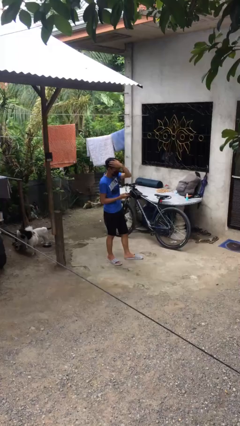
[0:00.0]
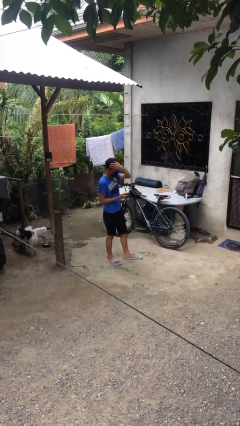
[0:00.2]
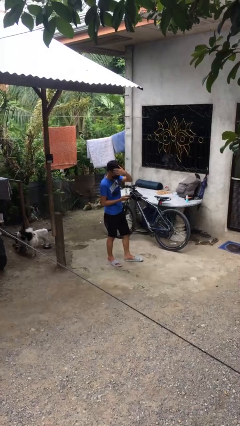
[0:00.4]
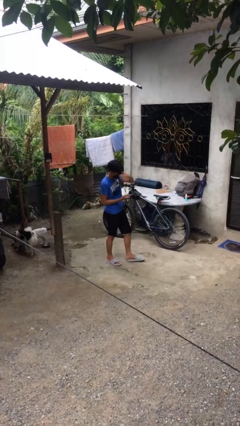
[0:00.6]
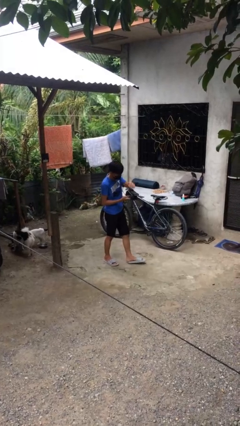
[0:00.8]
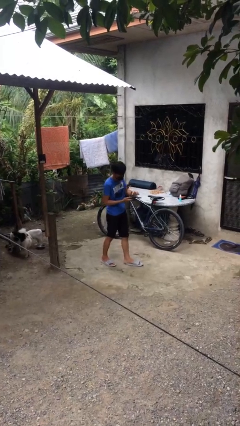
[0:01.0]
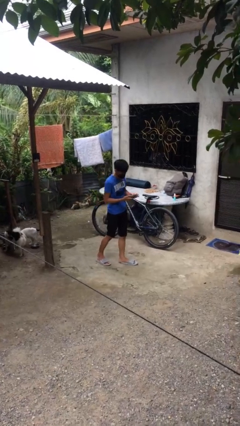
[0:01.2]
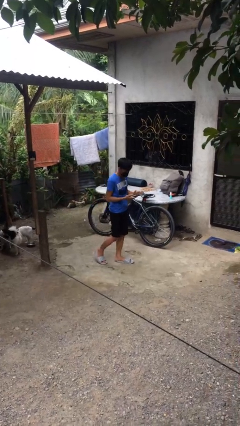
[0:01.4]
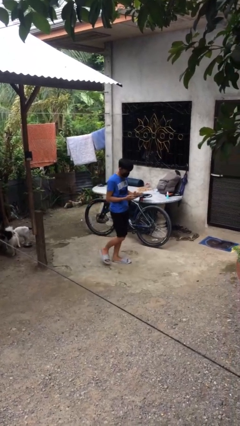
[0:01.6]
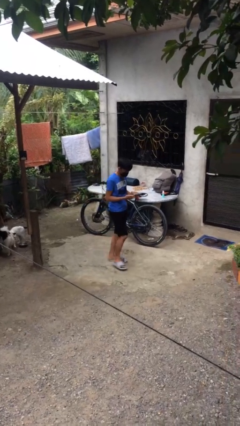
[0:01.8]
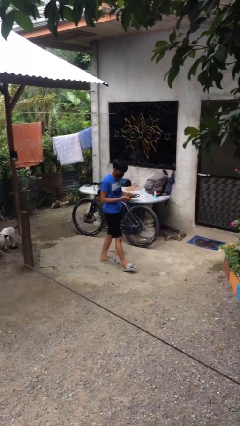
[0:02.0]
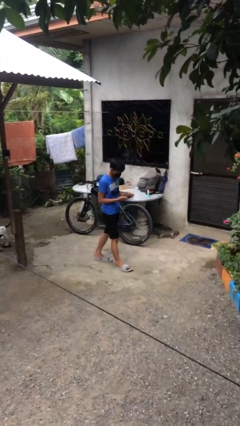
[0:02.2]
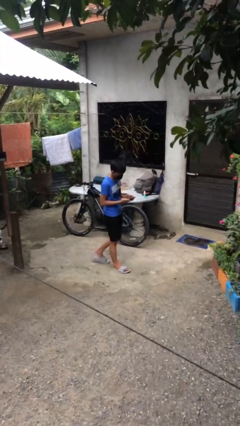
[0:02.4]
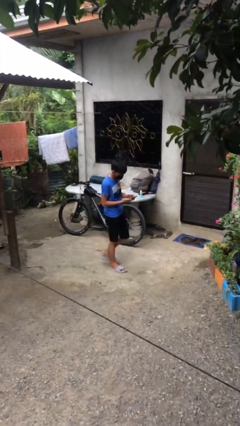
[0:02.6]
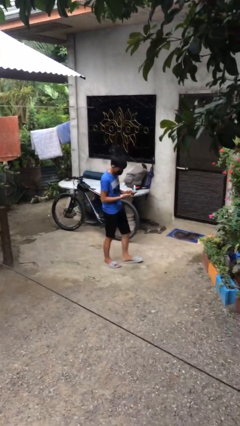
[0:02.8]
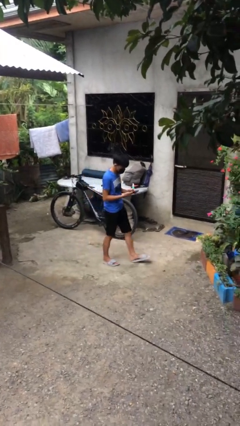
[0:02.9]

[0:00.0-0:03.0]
person texts on phone

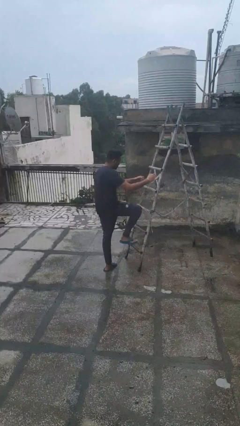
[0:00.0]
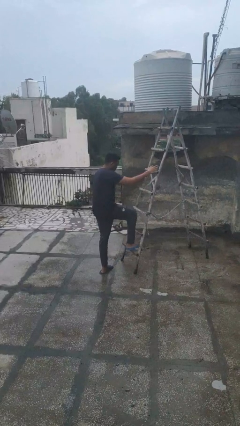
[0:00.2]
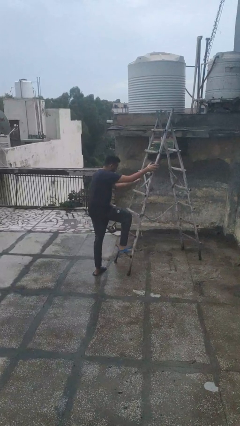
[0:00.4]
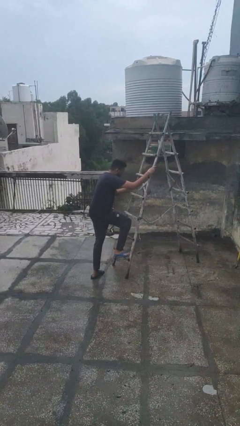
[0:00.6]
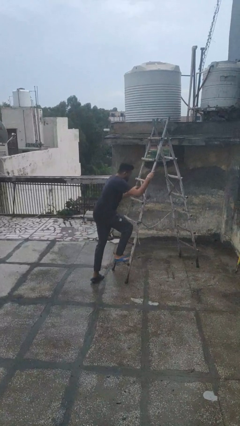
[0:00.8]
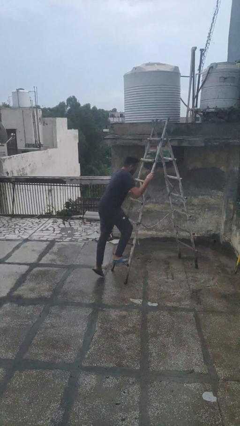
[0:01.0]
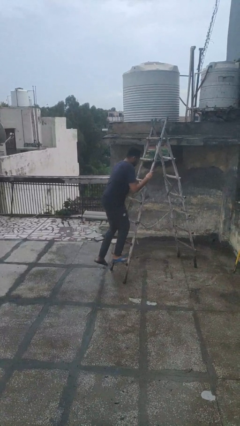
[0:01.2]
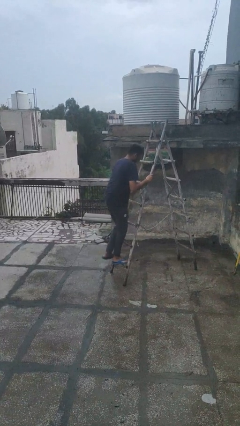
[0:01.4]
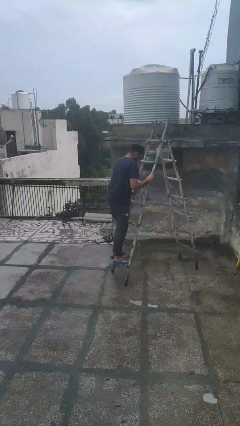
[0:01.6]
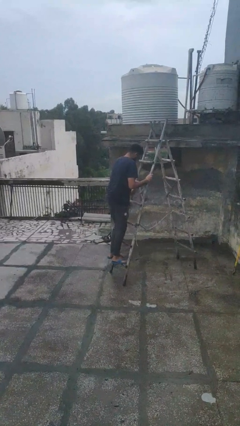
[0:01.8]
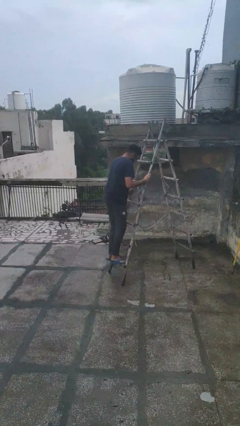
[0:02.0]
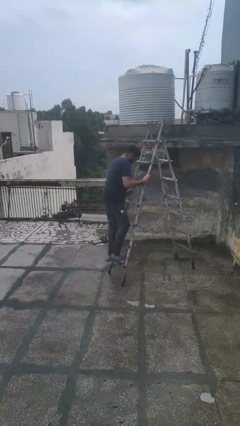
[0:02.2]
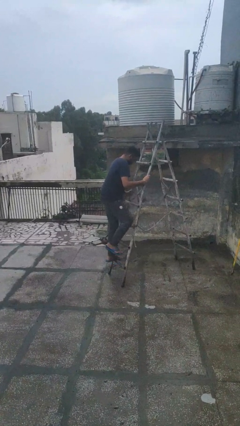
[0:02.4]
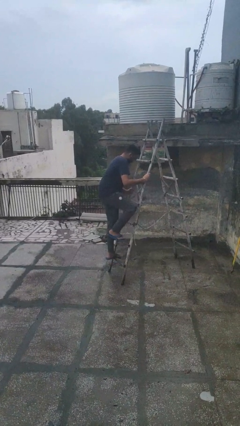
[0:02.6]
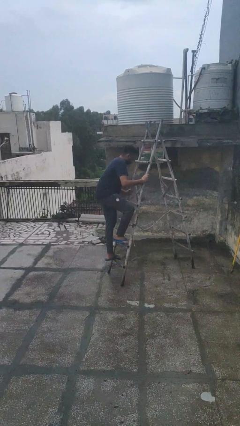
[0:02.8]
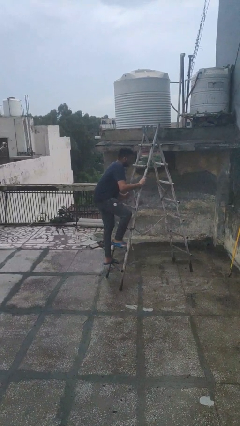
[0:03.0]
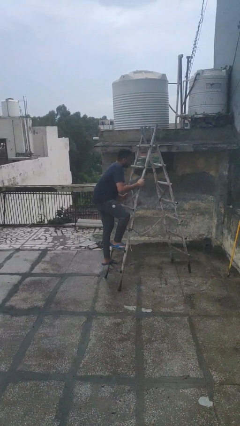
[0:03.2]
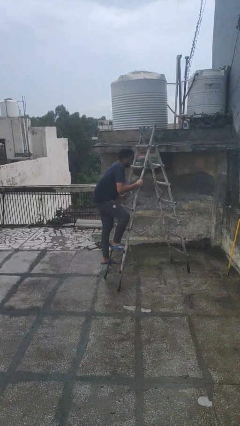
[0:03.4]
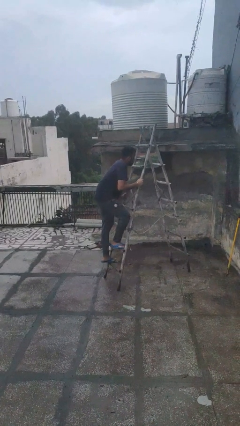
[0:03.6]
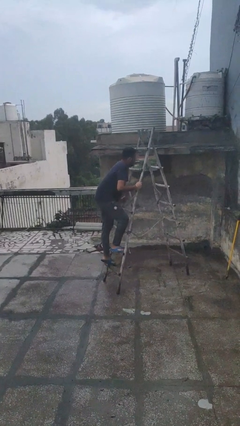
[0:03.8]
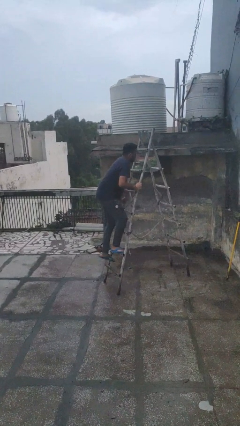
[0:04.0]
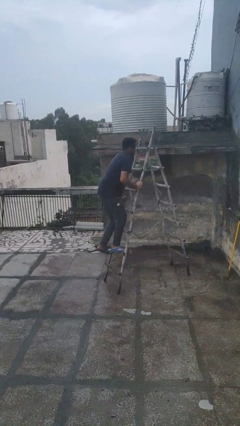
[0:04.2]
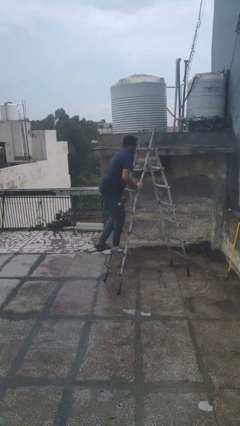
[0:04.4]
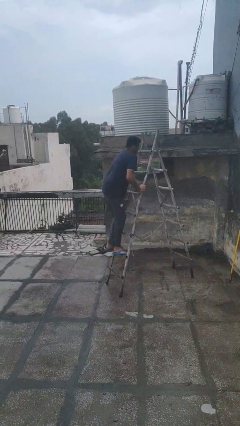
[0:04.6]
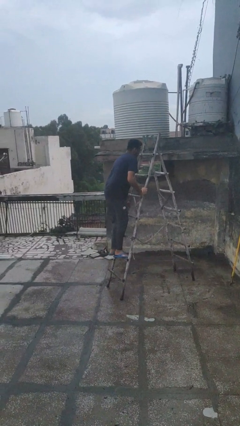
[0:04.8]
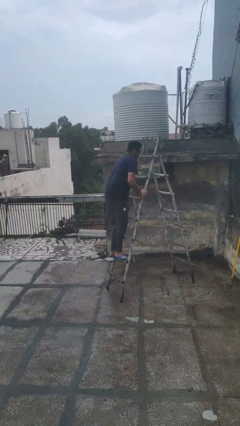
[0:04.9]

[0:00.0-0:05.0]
person climbs up ladder

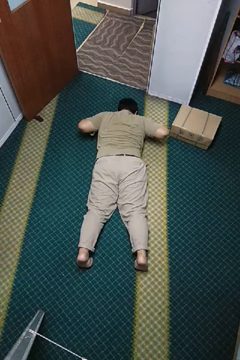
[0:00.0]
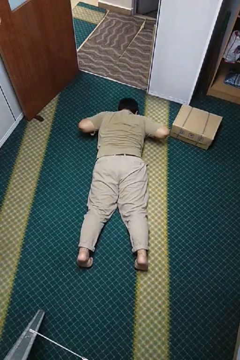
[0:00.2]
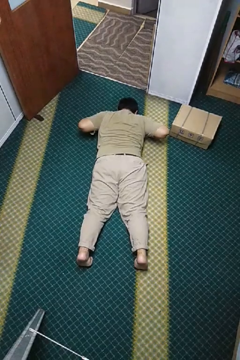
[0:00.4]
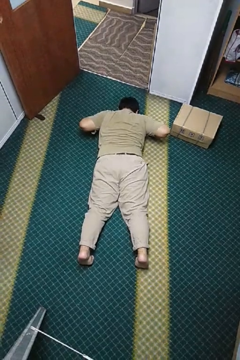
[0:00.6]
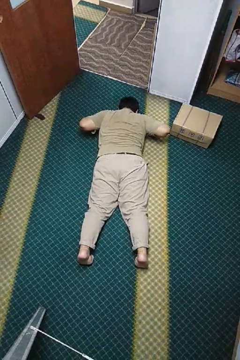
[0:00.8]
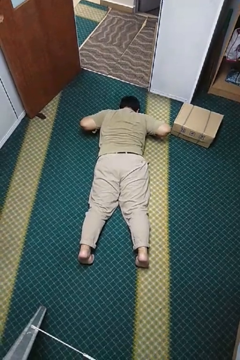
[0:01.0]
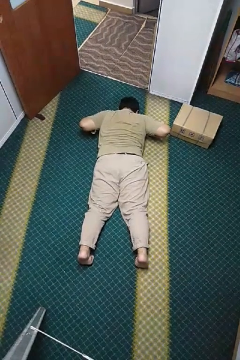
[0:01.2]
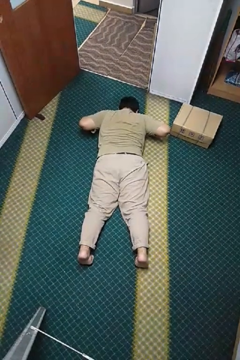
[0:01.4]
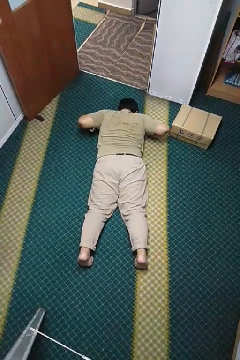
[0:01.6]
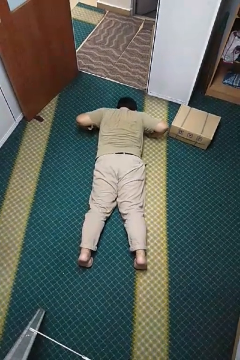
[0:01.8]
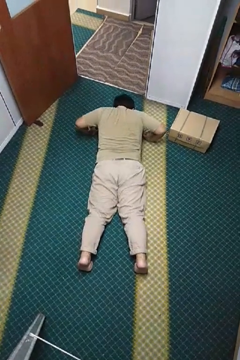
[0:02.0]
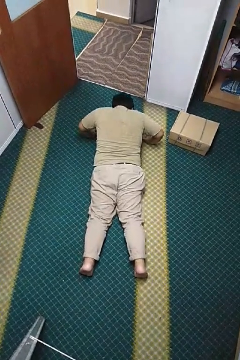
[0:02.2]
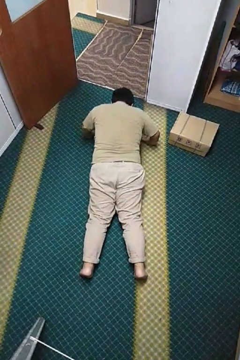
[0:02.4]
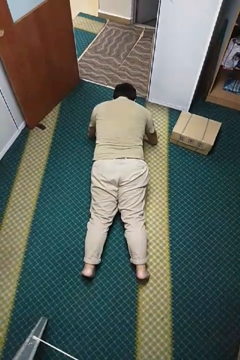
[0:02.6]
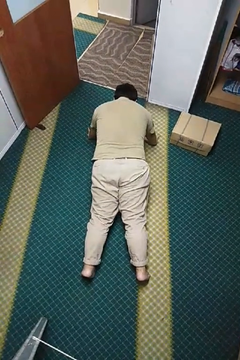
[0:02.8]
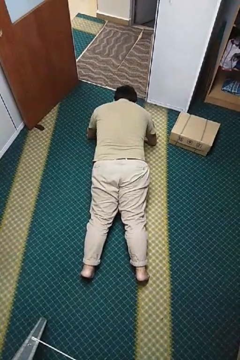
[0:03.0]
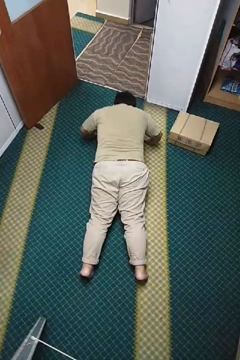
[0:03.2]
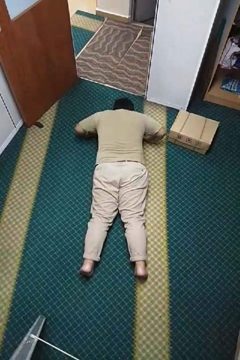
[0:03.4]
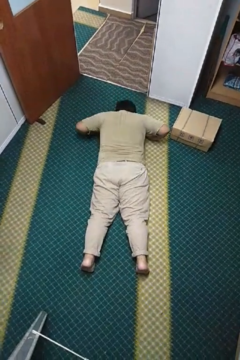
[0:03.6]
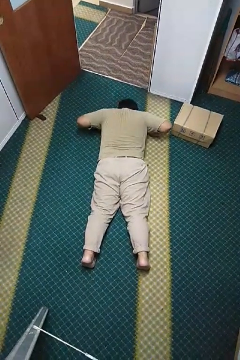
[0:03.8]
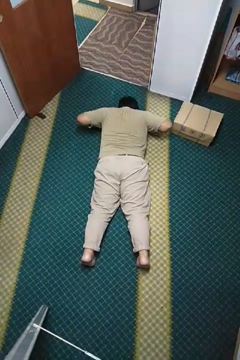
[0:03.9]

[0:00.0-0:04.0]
person exercises with pushup

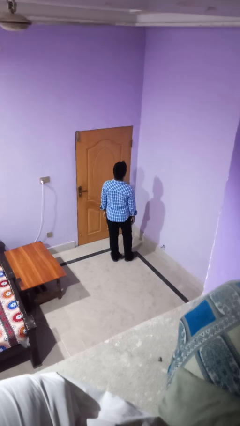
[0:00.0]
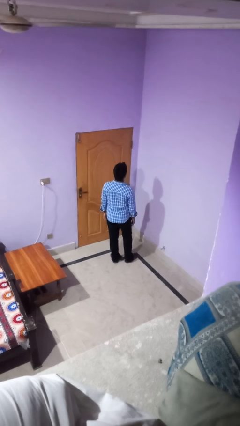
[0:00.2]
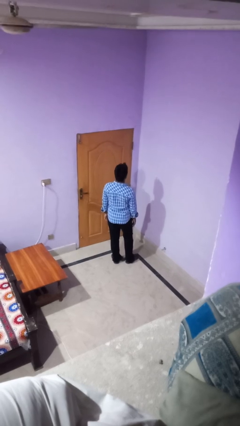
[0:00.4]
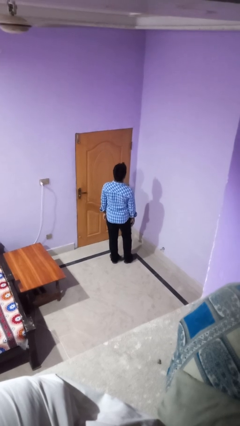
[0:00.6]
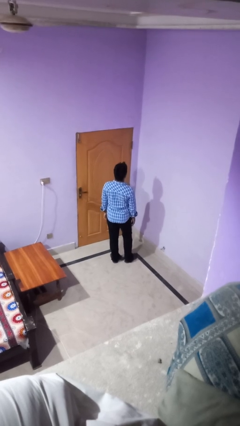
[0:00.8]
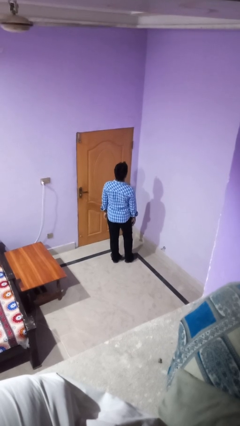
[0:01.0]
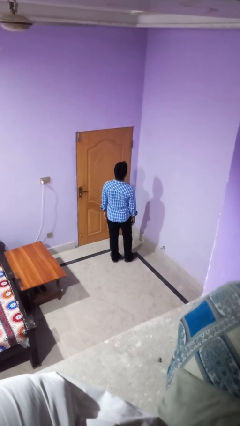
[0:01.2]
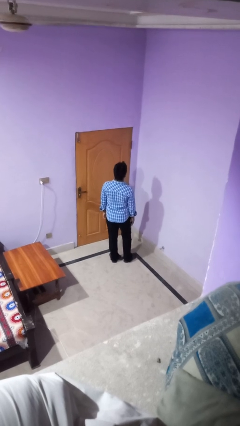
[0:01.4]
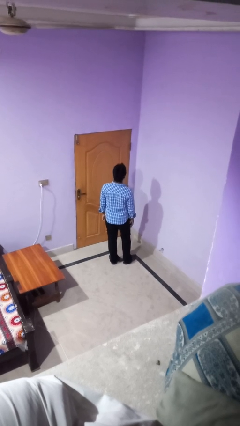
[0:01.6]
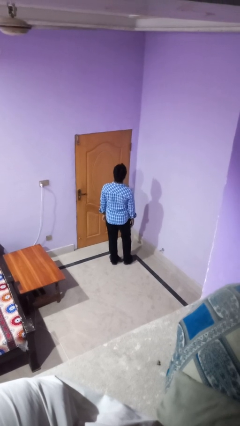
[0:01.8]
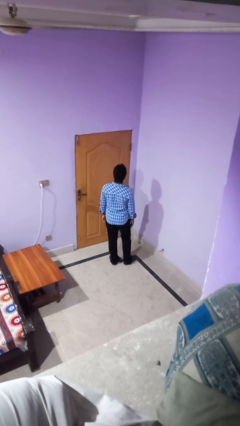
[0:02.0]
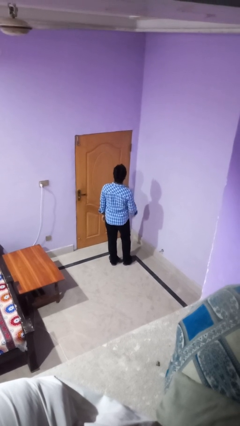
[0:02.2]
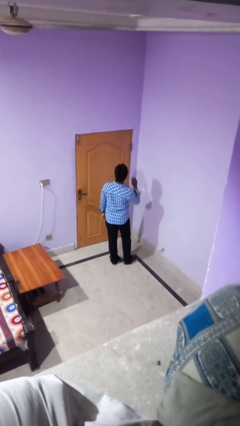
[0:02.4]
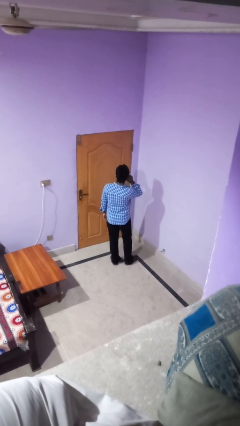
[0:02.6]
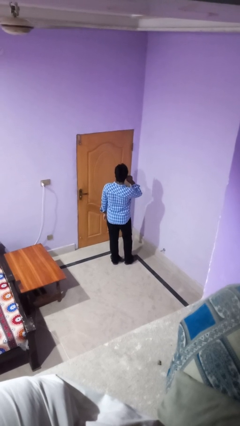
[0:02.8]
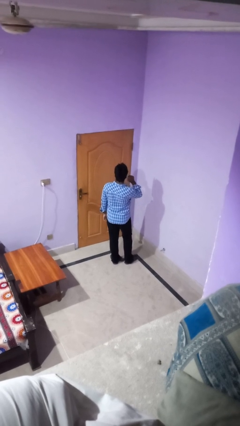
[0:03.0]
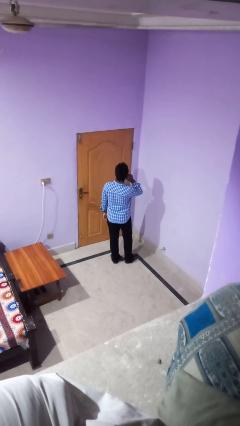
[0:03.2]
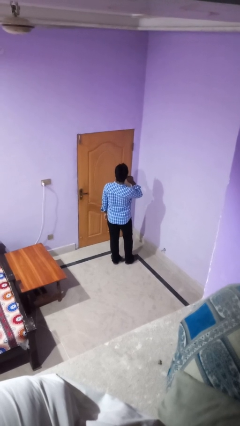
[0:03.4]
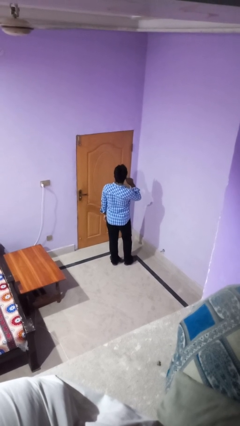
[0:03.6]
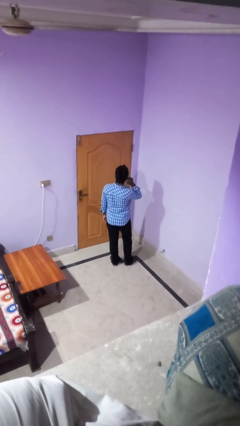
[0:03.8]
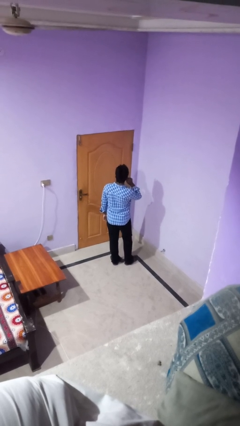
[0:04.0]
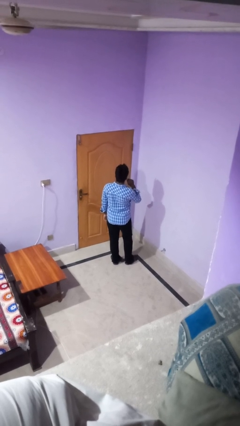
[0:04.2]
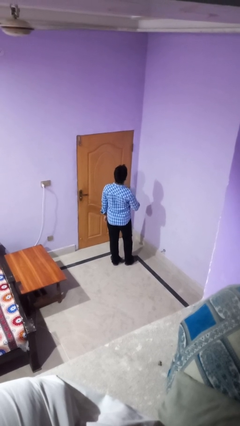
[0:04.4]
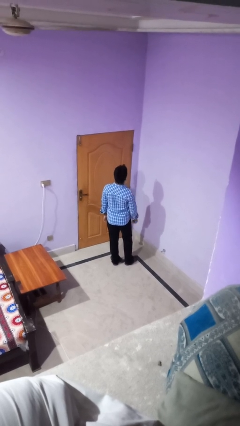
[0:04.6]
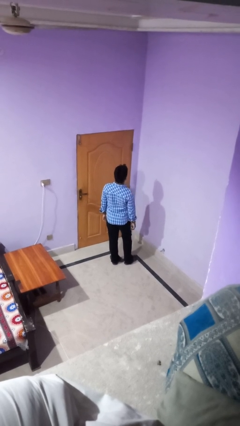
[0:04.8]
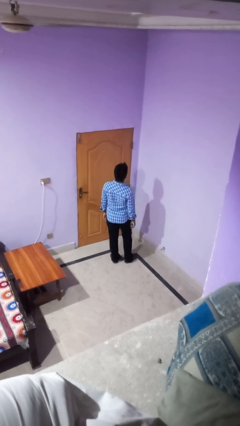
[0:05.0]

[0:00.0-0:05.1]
person touches earlobe

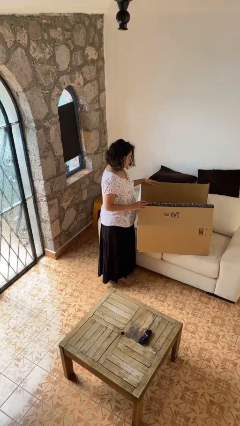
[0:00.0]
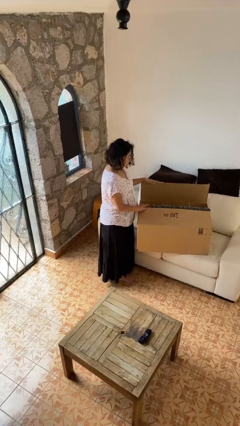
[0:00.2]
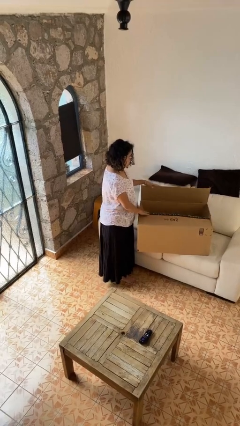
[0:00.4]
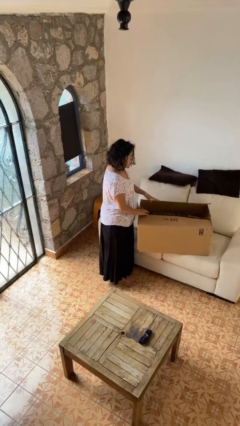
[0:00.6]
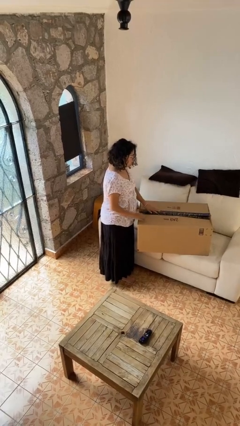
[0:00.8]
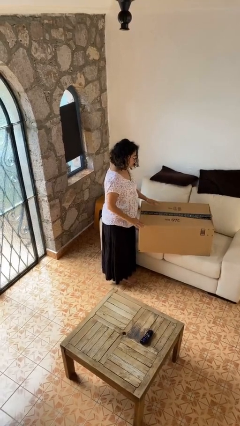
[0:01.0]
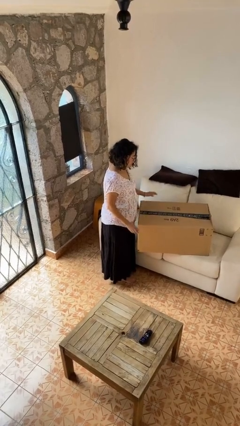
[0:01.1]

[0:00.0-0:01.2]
person closes box
